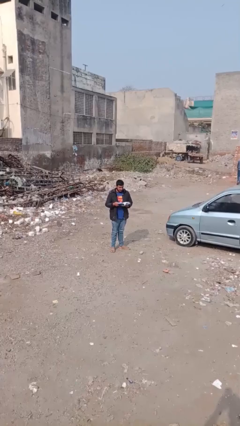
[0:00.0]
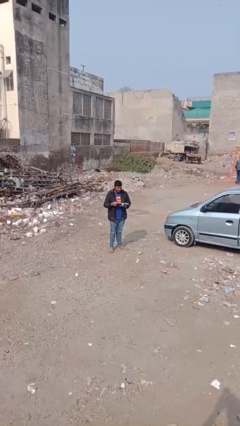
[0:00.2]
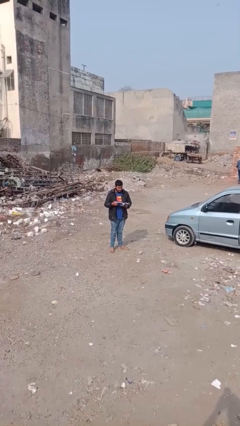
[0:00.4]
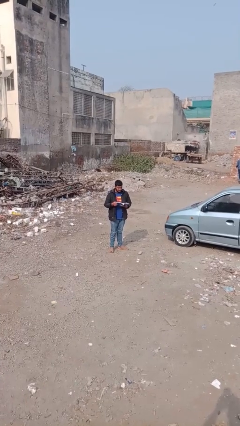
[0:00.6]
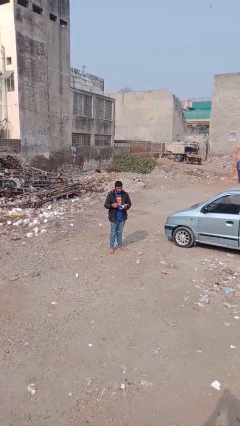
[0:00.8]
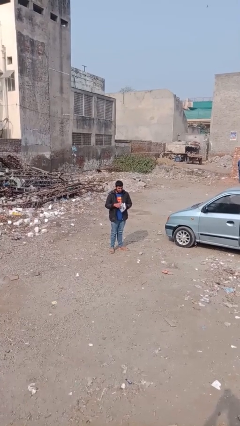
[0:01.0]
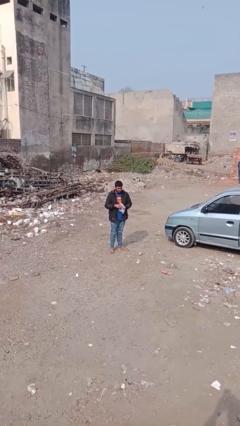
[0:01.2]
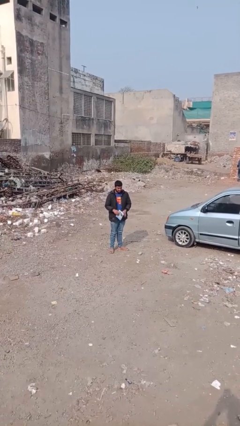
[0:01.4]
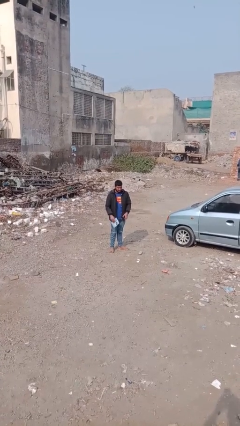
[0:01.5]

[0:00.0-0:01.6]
person reads document

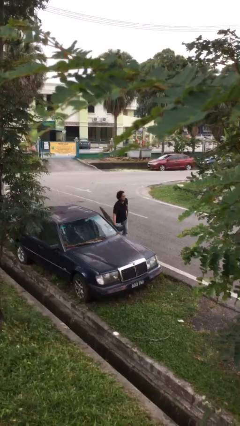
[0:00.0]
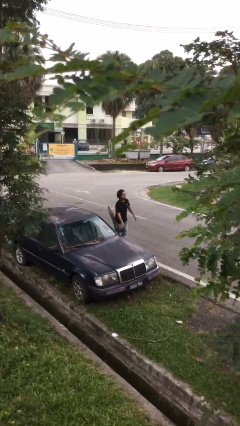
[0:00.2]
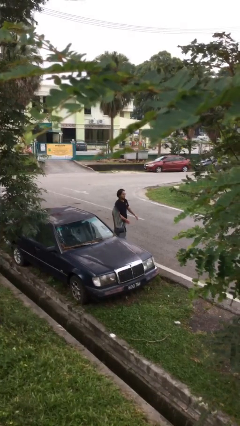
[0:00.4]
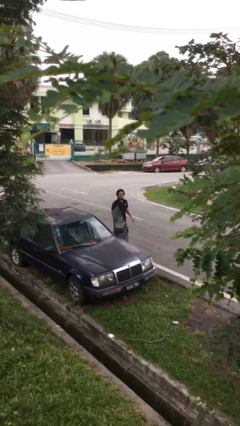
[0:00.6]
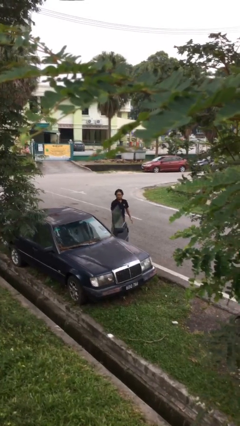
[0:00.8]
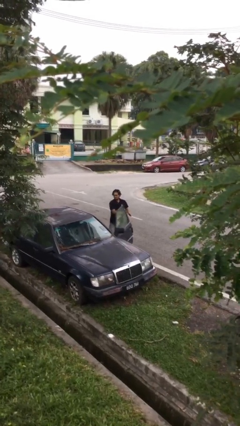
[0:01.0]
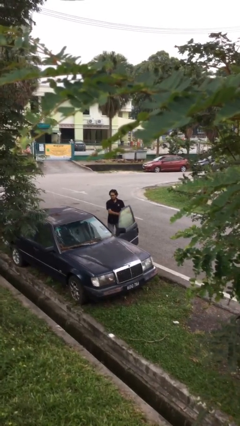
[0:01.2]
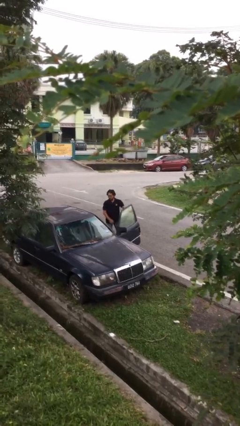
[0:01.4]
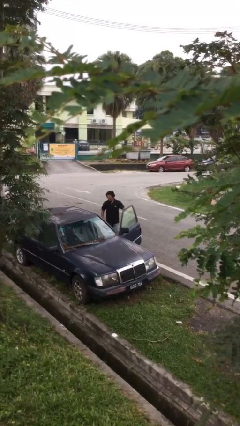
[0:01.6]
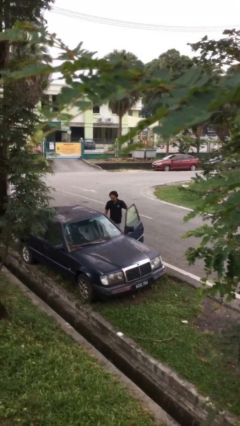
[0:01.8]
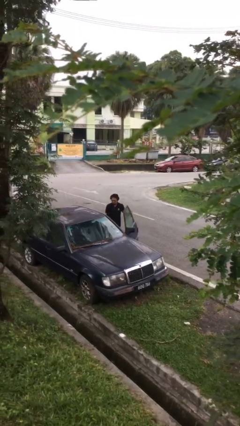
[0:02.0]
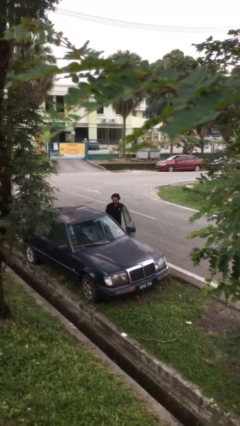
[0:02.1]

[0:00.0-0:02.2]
person opens car door

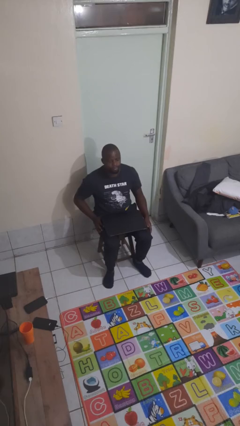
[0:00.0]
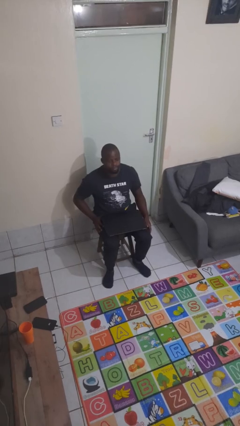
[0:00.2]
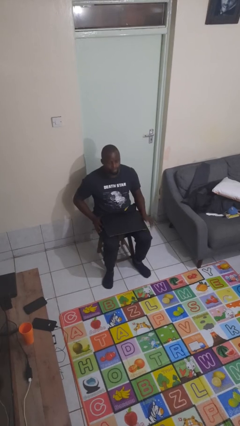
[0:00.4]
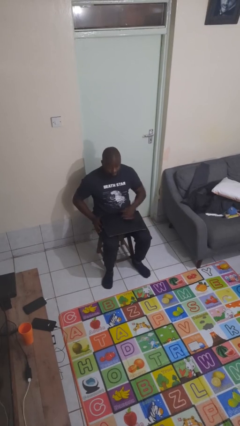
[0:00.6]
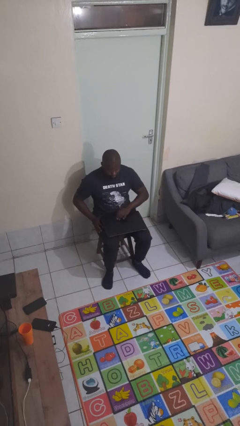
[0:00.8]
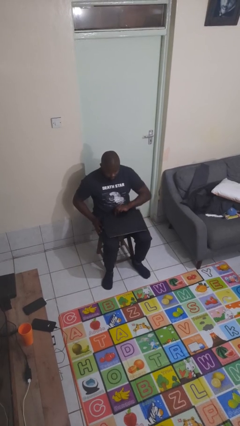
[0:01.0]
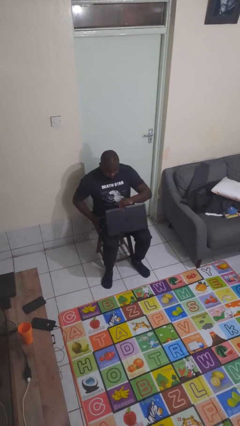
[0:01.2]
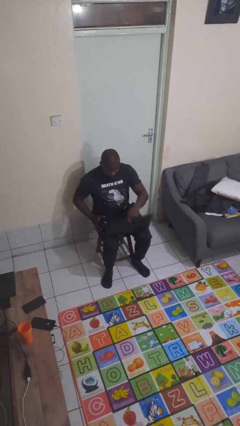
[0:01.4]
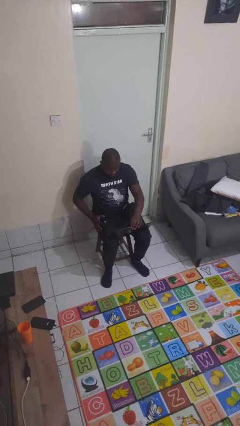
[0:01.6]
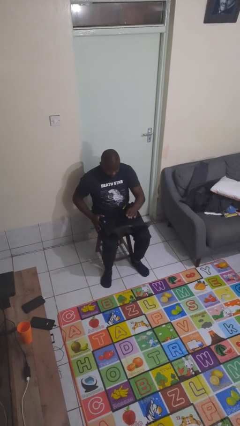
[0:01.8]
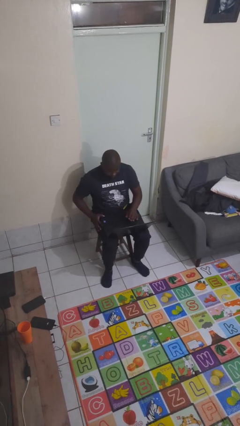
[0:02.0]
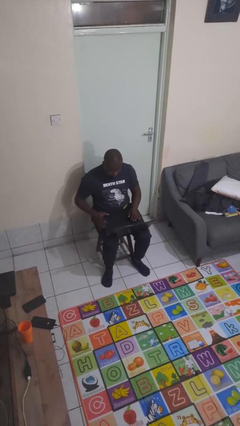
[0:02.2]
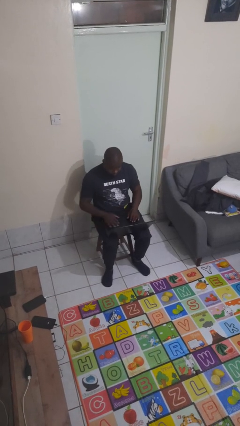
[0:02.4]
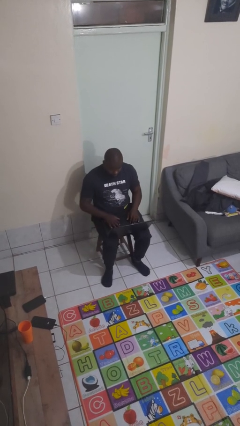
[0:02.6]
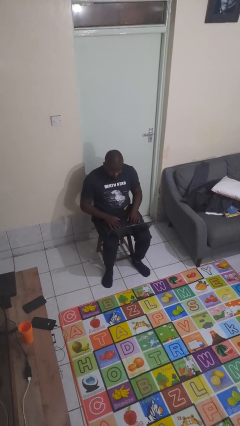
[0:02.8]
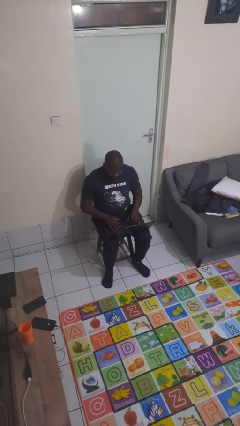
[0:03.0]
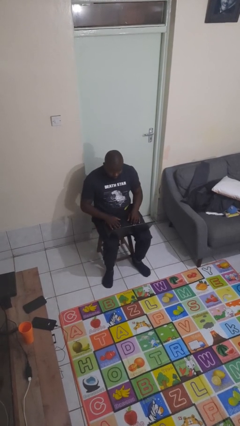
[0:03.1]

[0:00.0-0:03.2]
person opens laptop

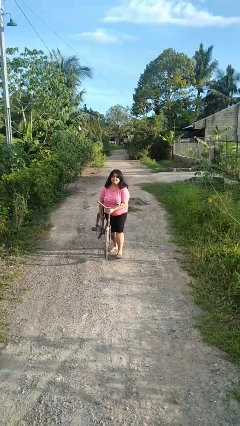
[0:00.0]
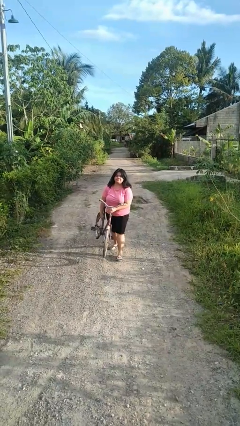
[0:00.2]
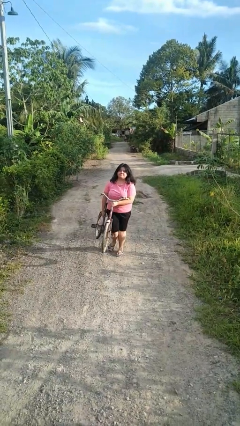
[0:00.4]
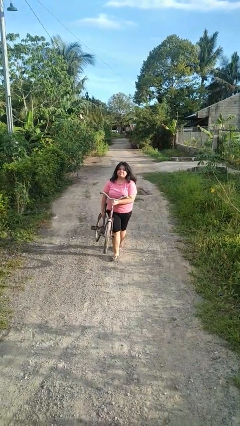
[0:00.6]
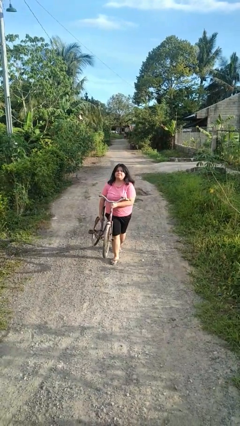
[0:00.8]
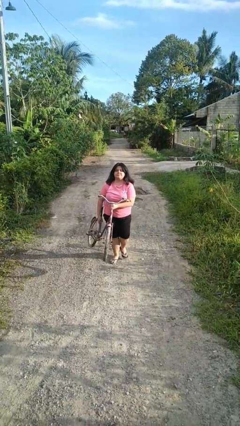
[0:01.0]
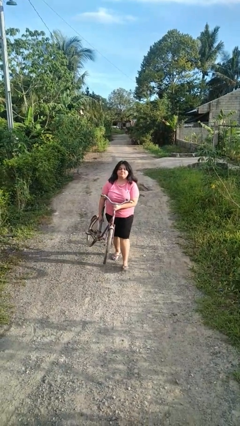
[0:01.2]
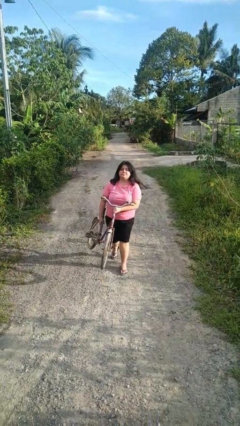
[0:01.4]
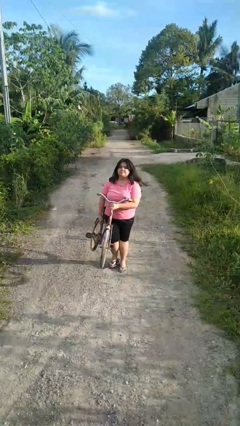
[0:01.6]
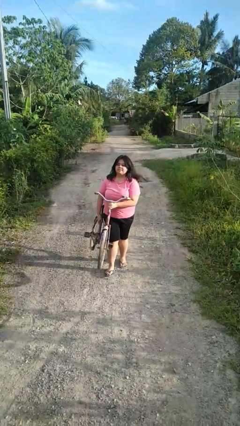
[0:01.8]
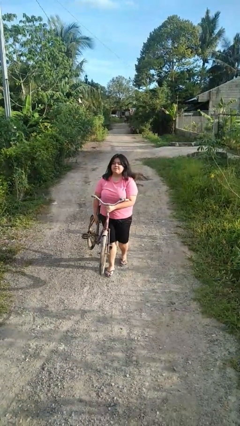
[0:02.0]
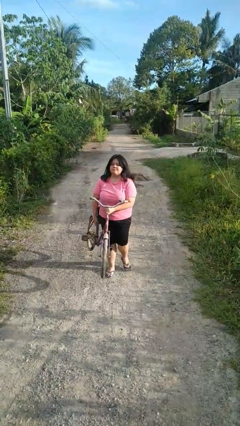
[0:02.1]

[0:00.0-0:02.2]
person carries bicycle

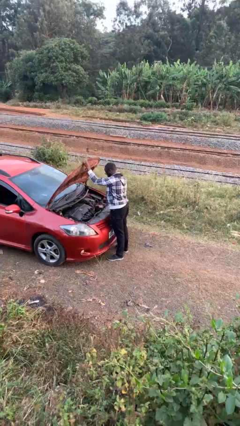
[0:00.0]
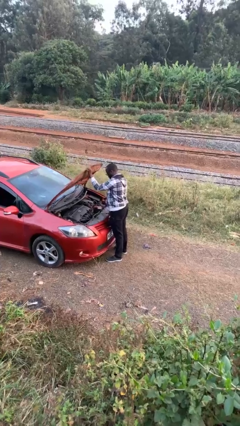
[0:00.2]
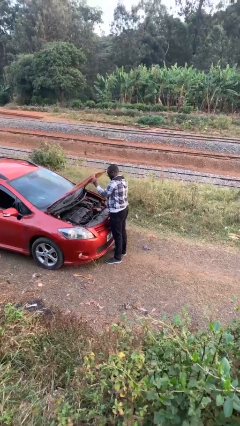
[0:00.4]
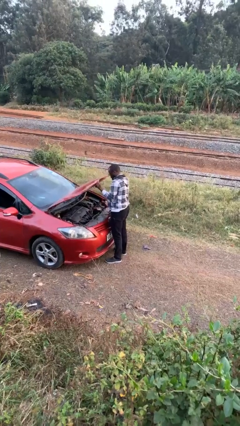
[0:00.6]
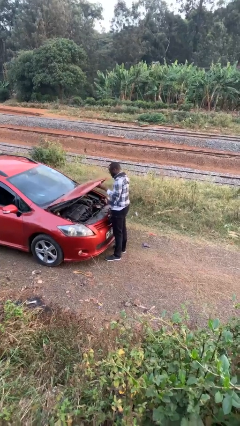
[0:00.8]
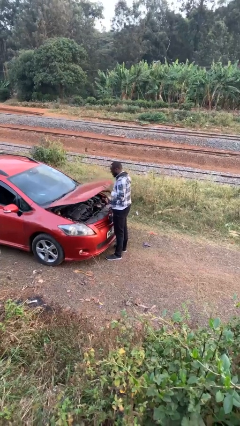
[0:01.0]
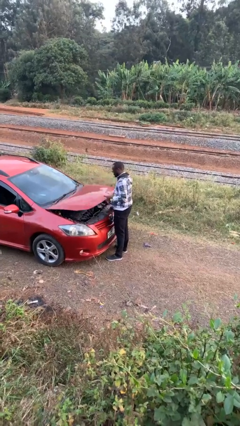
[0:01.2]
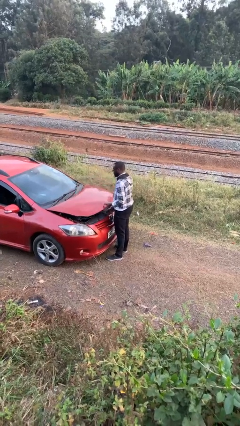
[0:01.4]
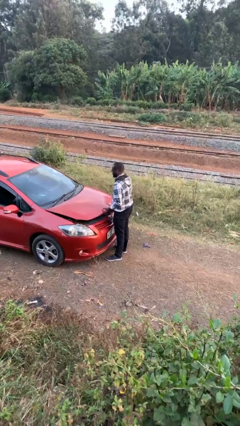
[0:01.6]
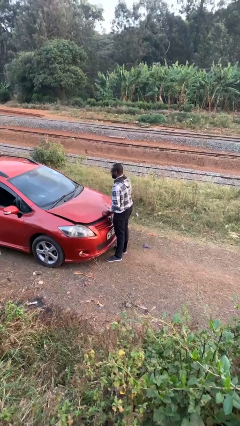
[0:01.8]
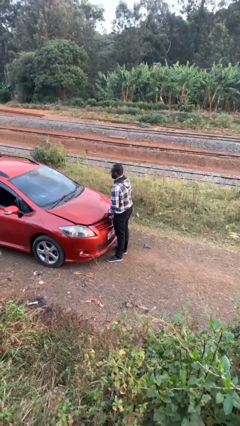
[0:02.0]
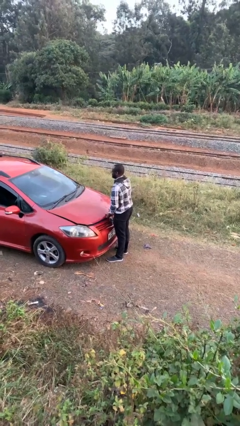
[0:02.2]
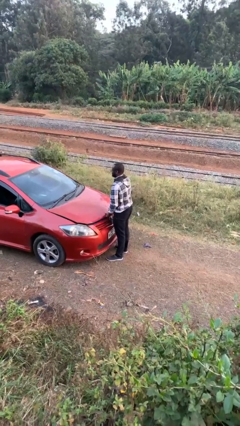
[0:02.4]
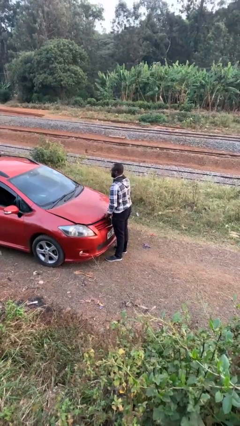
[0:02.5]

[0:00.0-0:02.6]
person closes car hood

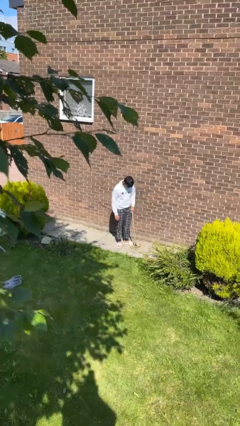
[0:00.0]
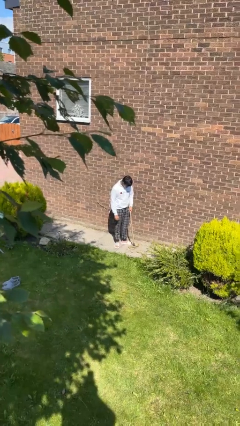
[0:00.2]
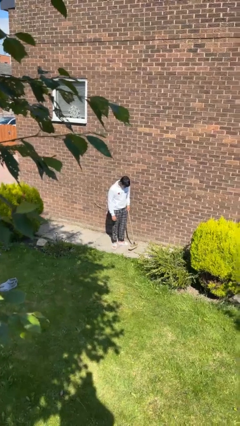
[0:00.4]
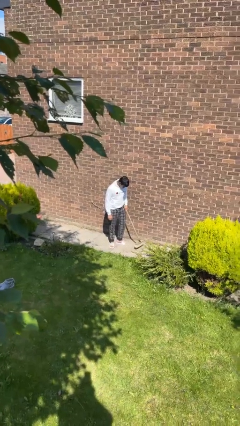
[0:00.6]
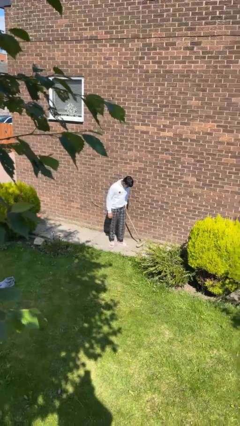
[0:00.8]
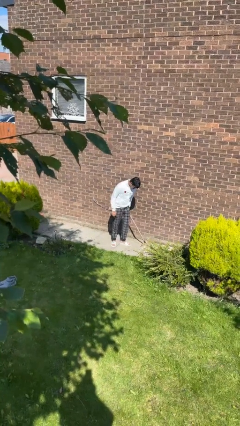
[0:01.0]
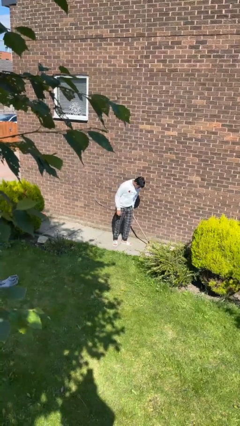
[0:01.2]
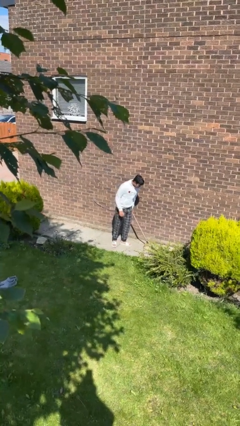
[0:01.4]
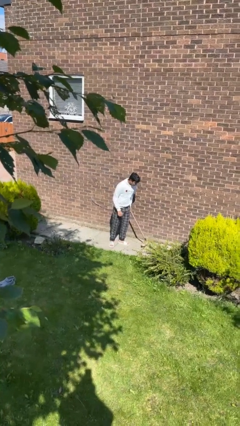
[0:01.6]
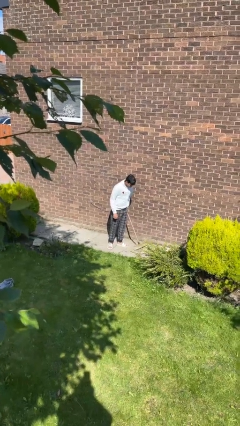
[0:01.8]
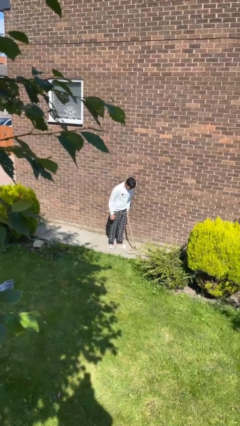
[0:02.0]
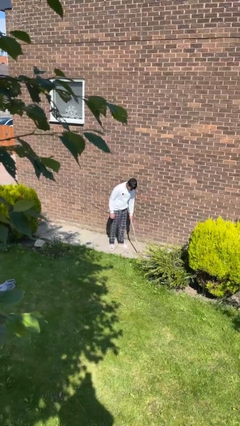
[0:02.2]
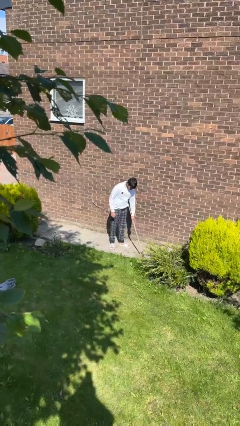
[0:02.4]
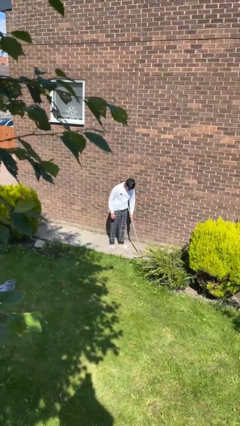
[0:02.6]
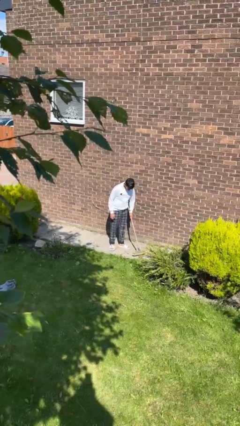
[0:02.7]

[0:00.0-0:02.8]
person sweeps floor

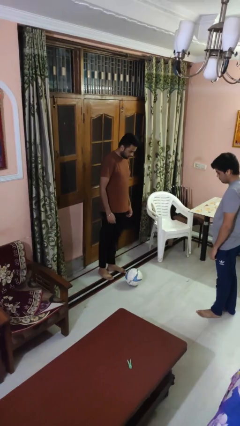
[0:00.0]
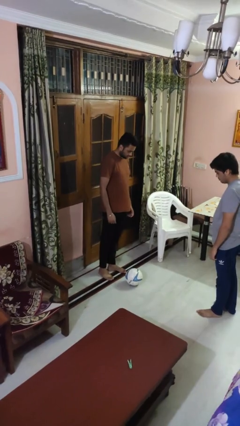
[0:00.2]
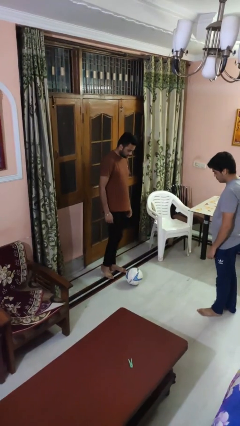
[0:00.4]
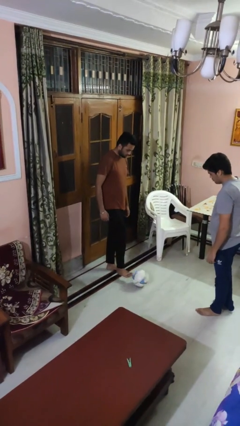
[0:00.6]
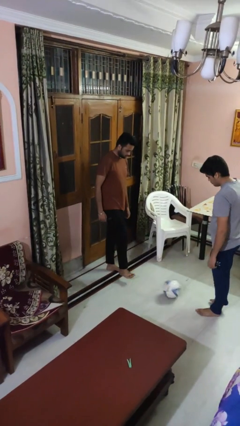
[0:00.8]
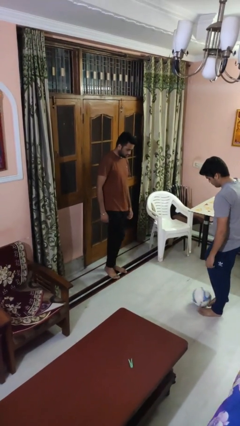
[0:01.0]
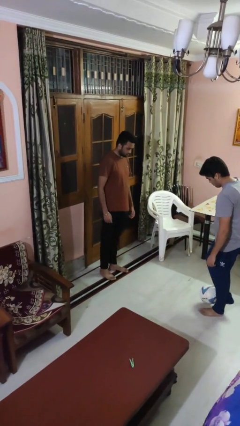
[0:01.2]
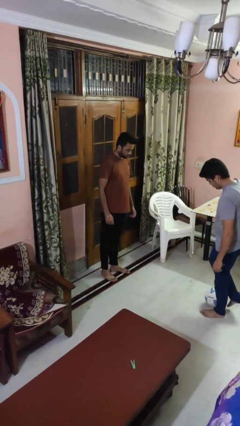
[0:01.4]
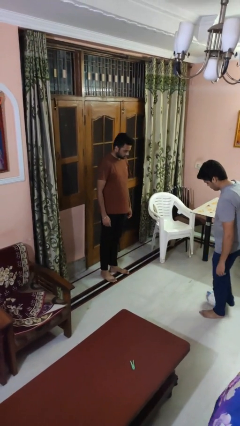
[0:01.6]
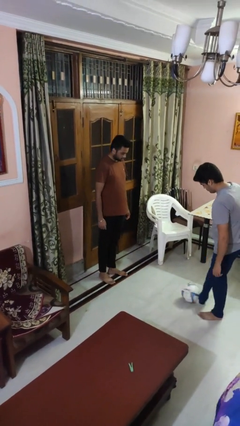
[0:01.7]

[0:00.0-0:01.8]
person kicks object to person

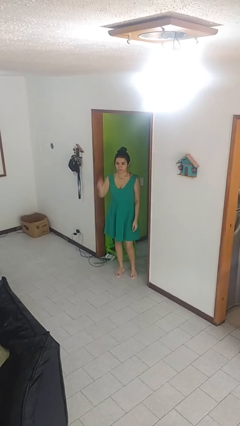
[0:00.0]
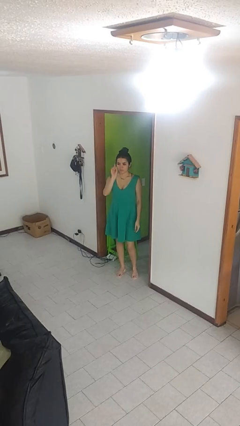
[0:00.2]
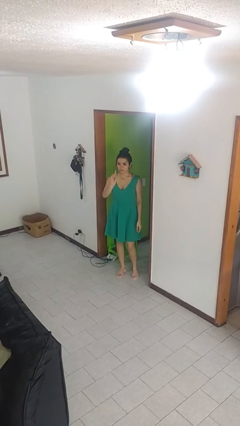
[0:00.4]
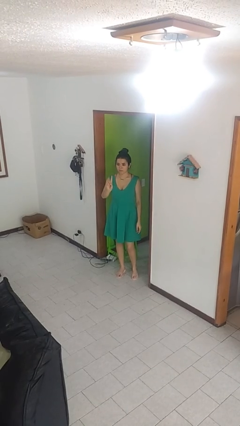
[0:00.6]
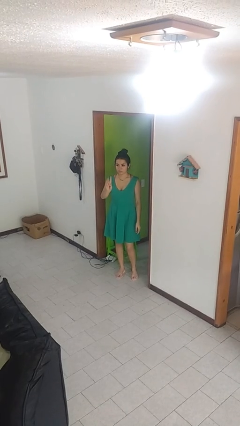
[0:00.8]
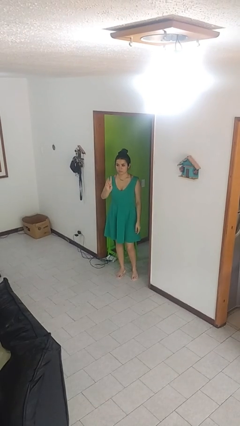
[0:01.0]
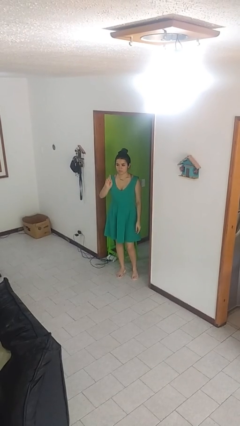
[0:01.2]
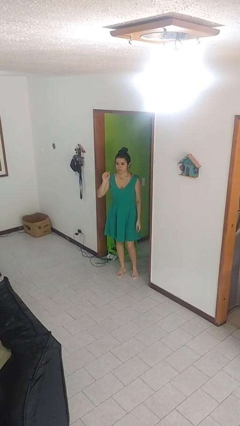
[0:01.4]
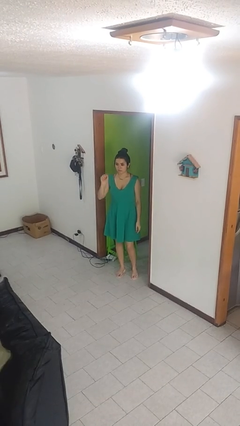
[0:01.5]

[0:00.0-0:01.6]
person gestures number one
